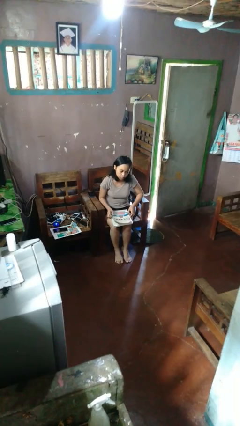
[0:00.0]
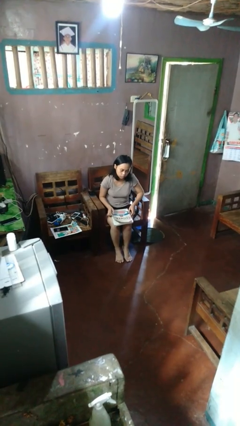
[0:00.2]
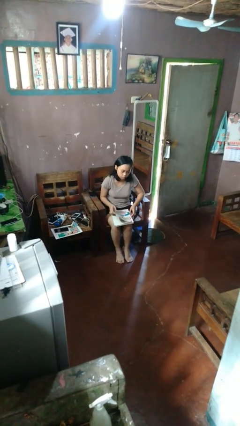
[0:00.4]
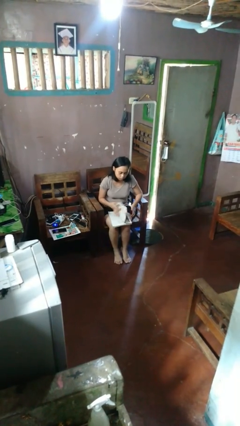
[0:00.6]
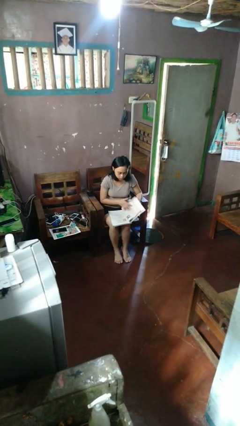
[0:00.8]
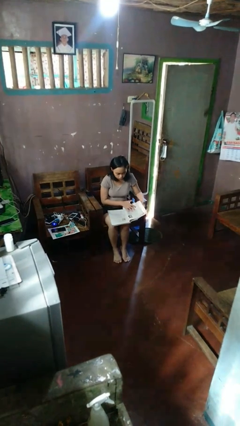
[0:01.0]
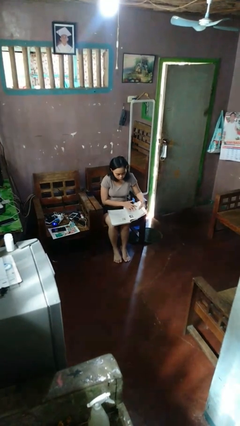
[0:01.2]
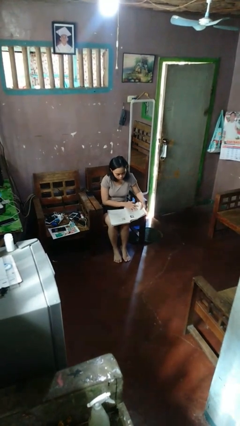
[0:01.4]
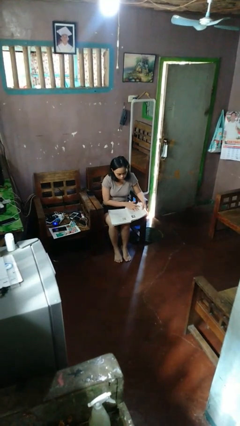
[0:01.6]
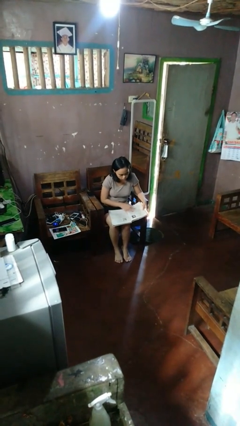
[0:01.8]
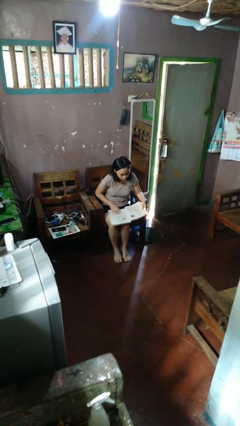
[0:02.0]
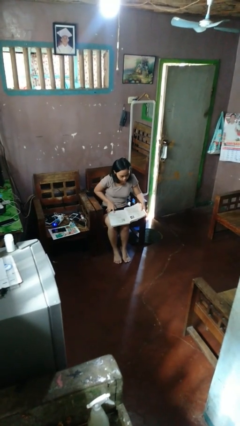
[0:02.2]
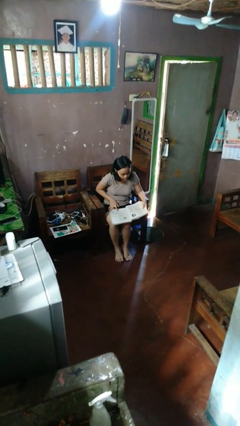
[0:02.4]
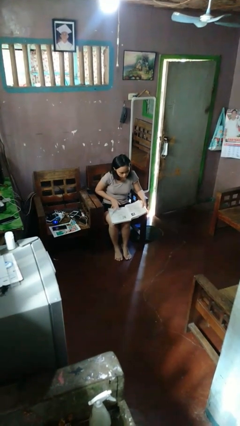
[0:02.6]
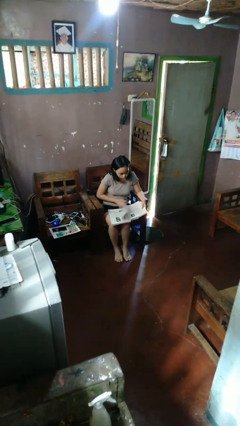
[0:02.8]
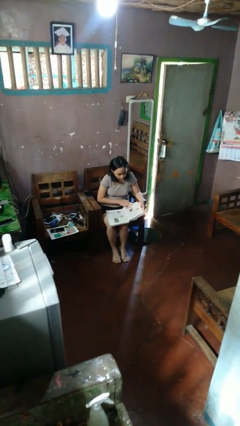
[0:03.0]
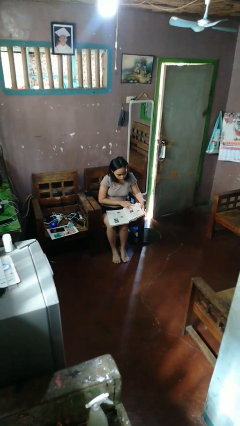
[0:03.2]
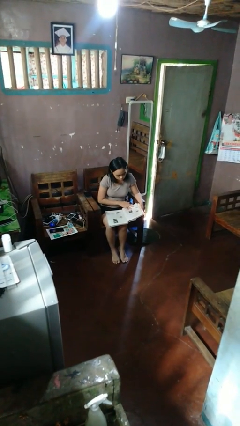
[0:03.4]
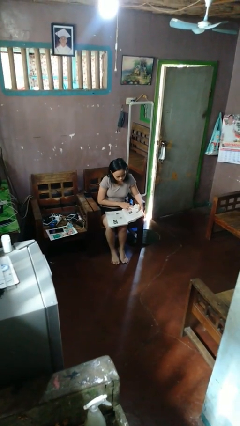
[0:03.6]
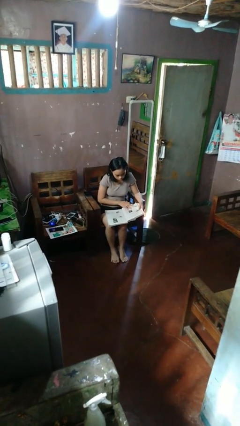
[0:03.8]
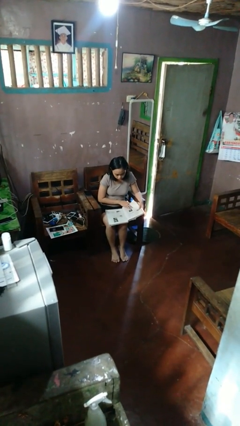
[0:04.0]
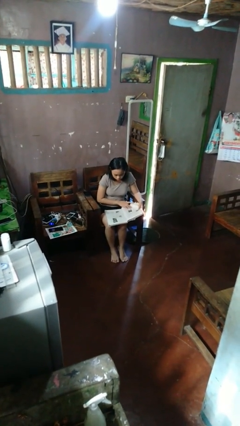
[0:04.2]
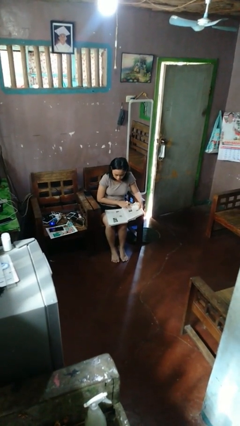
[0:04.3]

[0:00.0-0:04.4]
person reads book

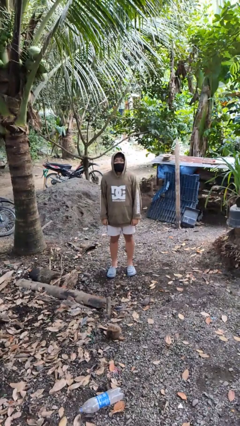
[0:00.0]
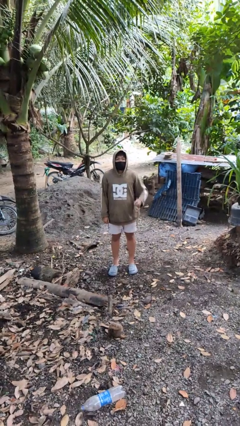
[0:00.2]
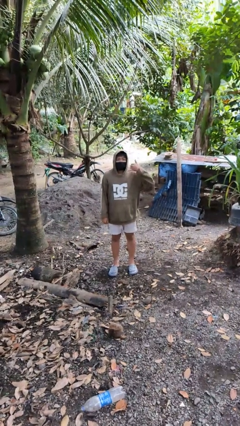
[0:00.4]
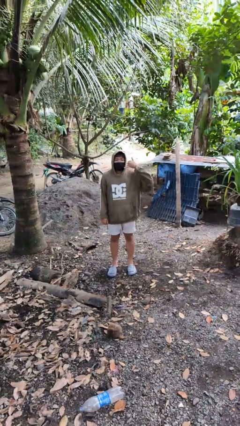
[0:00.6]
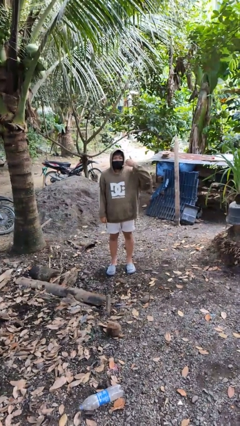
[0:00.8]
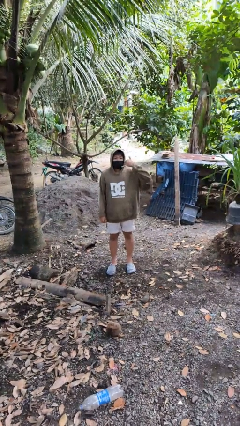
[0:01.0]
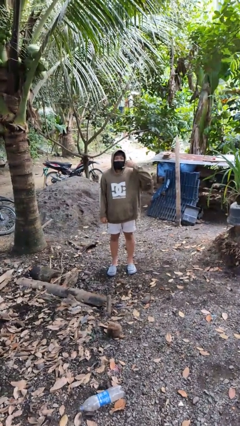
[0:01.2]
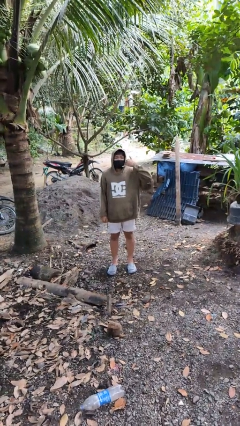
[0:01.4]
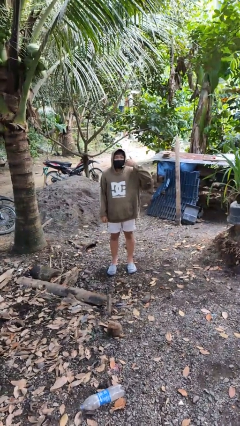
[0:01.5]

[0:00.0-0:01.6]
person gestures call me

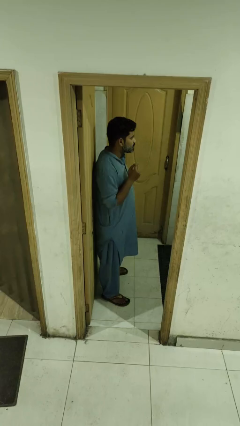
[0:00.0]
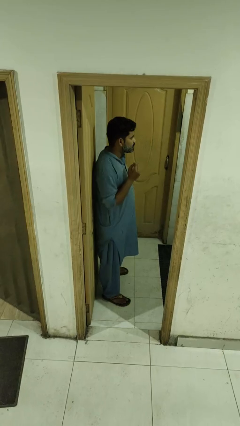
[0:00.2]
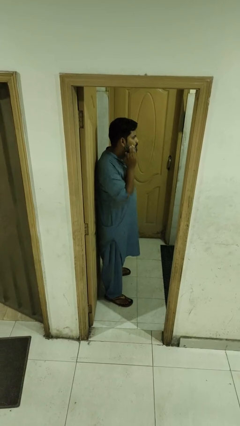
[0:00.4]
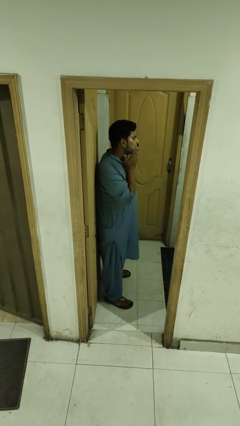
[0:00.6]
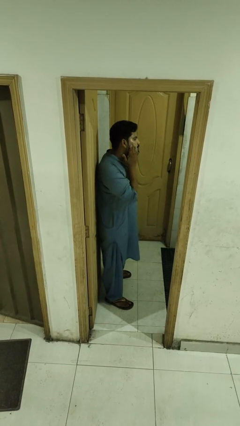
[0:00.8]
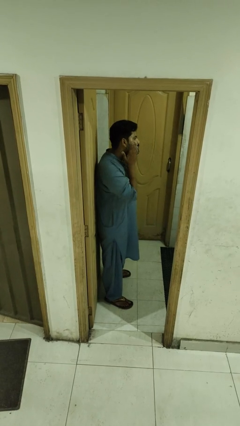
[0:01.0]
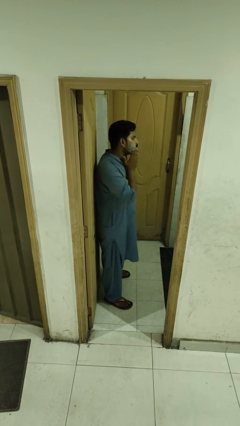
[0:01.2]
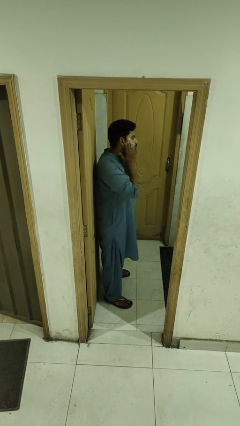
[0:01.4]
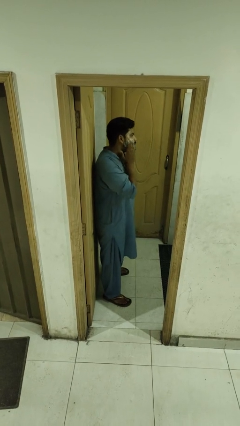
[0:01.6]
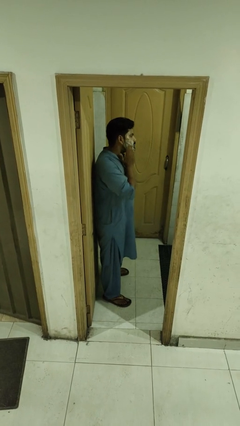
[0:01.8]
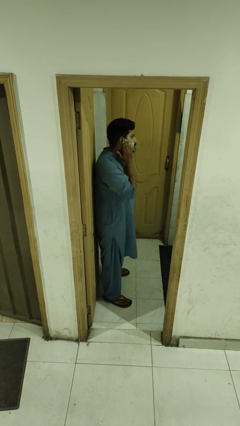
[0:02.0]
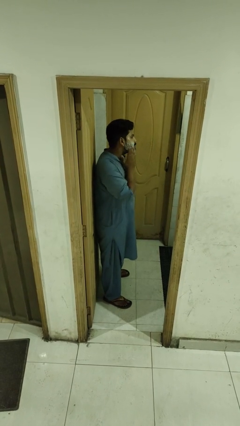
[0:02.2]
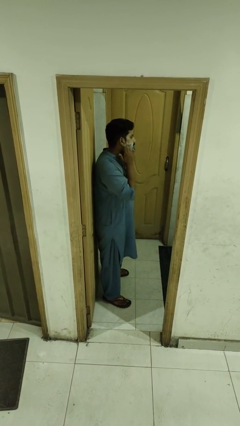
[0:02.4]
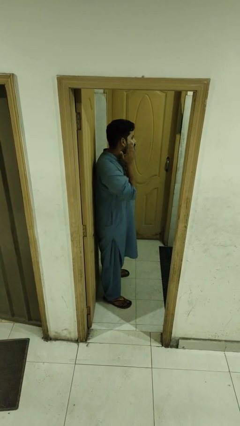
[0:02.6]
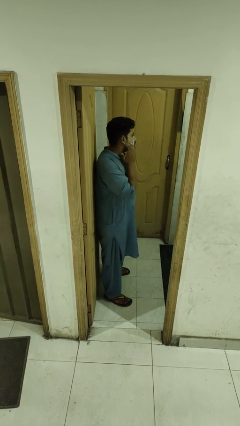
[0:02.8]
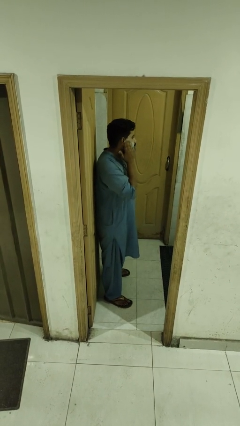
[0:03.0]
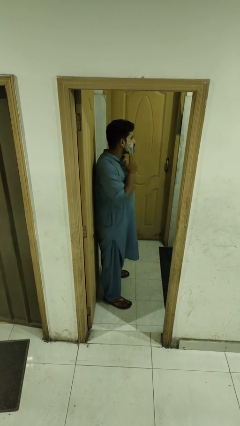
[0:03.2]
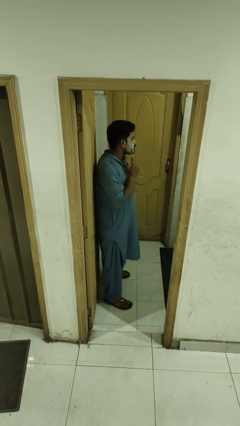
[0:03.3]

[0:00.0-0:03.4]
person applies shaving cream

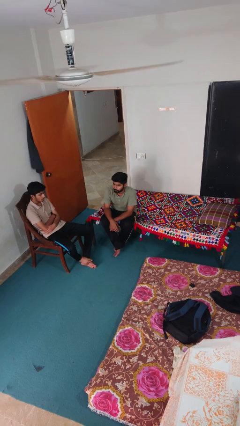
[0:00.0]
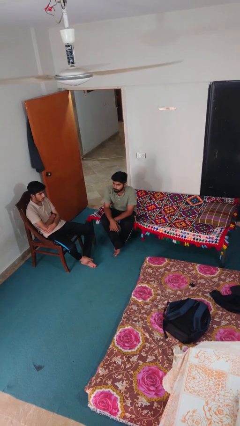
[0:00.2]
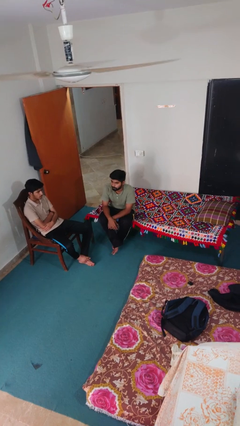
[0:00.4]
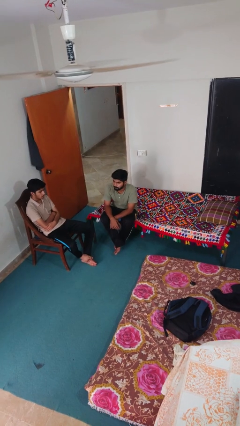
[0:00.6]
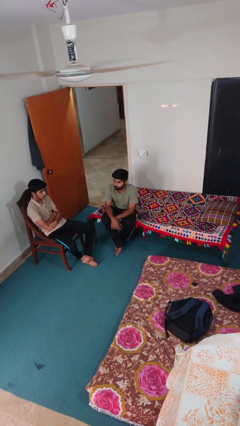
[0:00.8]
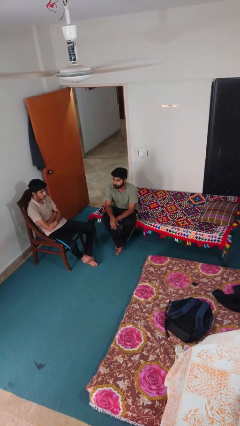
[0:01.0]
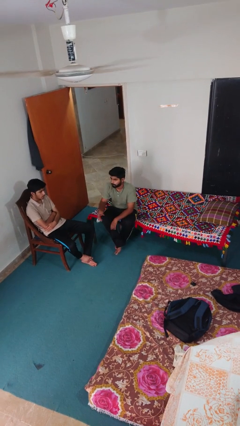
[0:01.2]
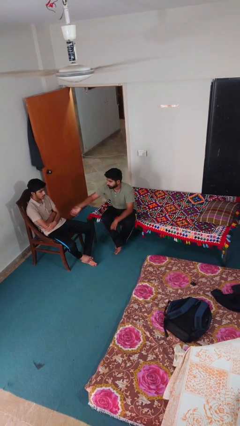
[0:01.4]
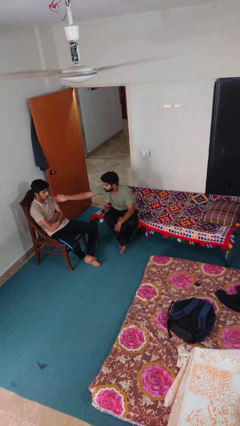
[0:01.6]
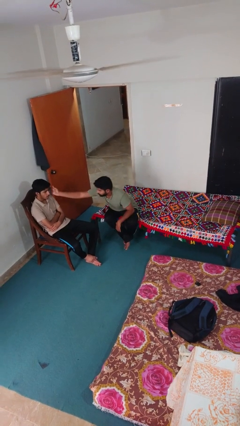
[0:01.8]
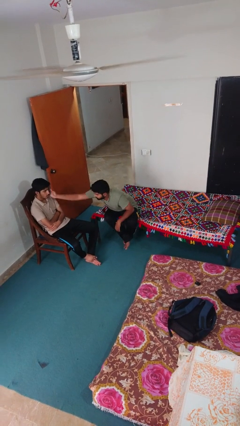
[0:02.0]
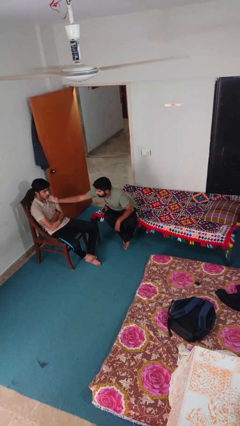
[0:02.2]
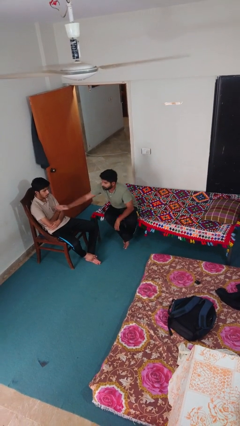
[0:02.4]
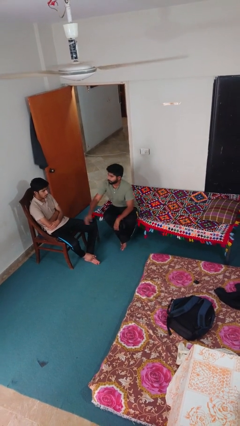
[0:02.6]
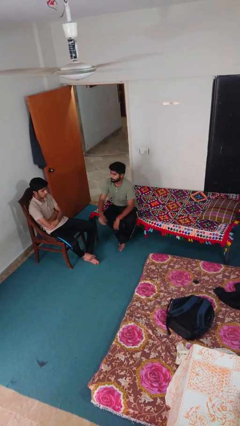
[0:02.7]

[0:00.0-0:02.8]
person touches face of person

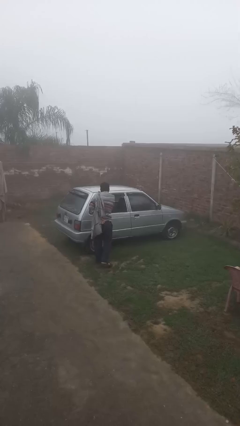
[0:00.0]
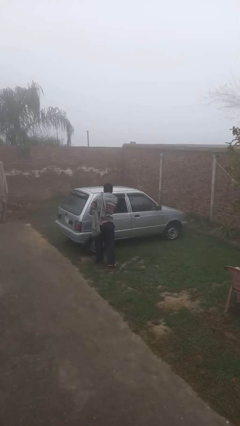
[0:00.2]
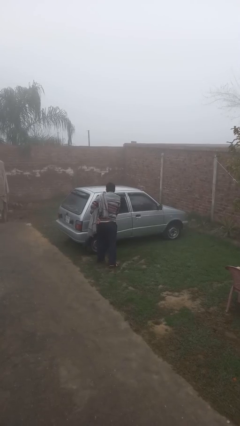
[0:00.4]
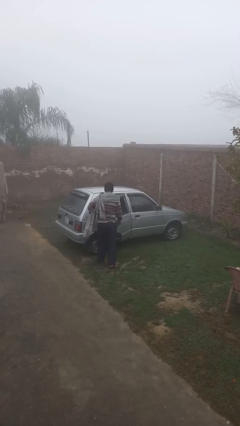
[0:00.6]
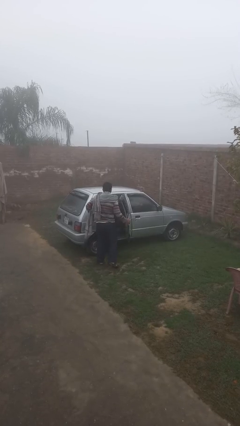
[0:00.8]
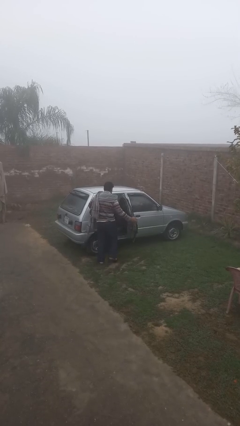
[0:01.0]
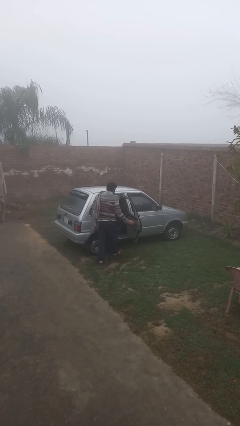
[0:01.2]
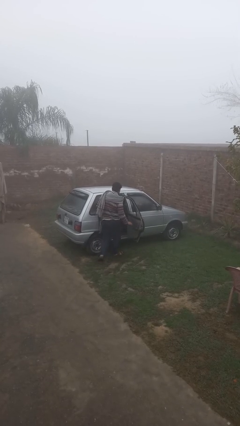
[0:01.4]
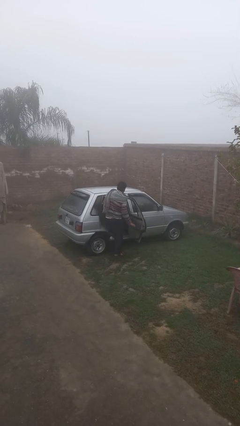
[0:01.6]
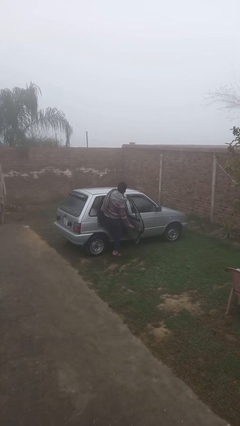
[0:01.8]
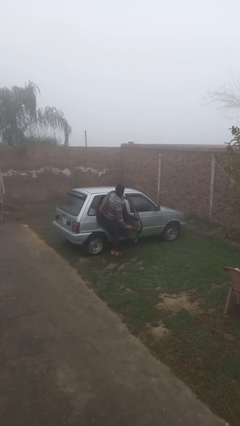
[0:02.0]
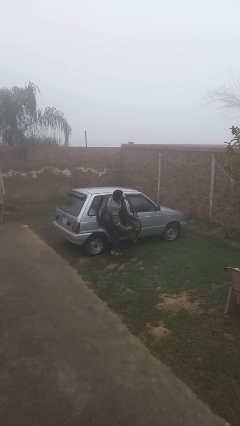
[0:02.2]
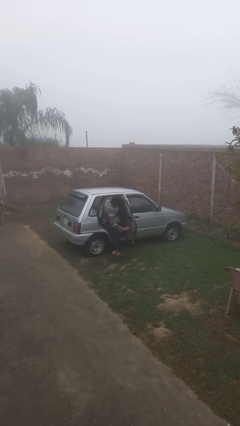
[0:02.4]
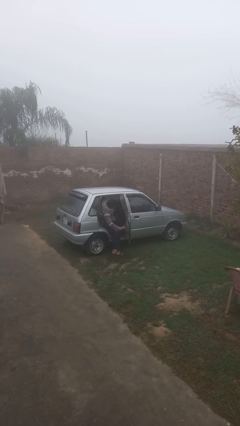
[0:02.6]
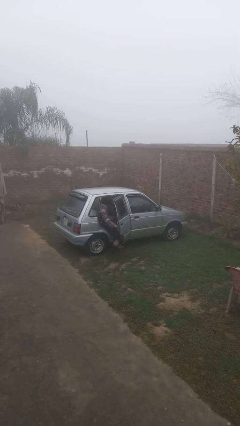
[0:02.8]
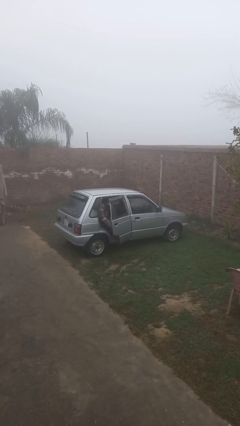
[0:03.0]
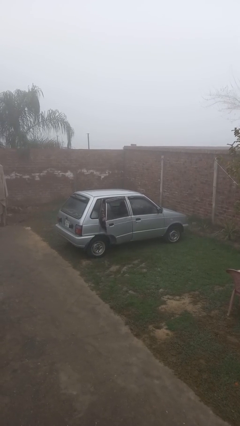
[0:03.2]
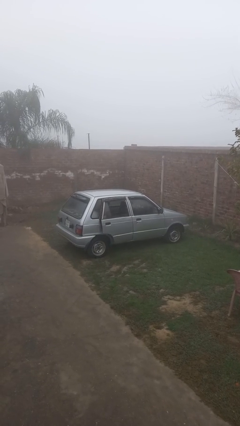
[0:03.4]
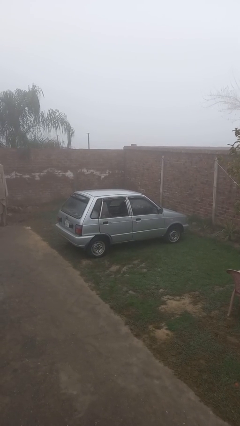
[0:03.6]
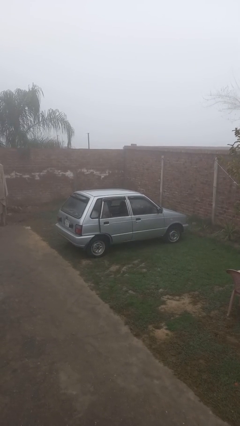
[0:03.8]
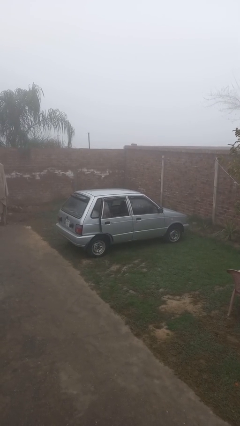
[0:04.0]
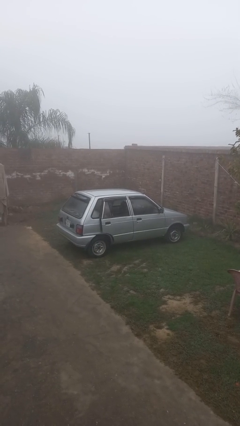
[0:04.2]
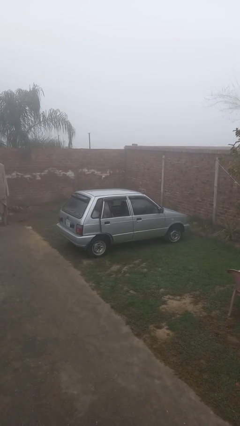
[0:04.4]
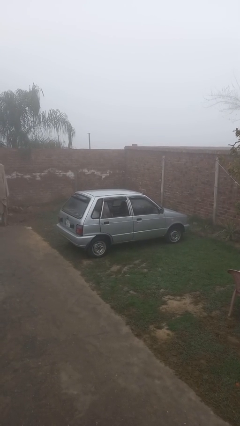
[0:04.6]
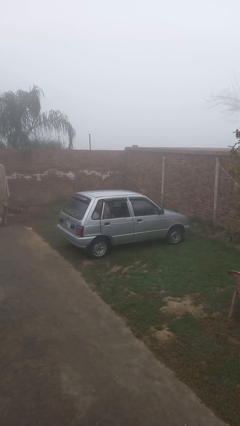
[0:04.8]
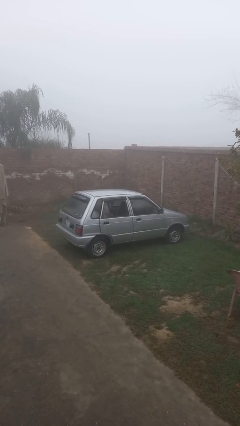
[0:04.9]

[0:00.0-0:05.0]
car picks up person
